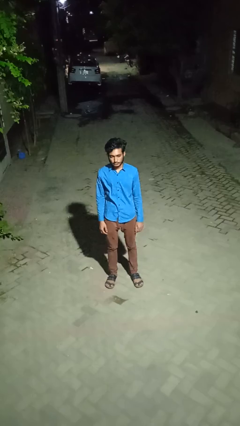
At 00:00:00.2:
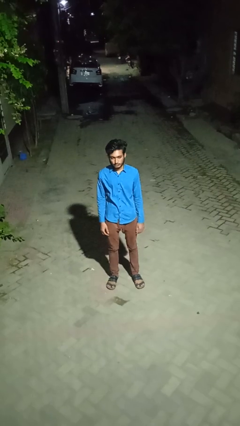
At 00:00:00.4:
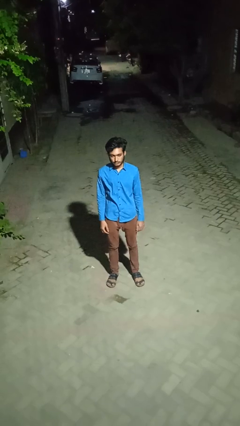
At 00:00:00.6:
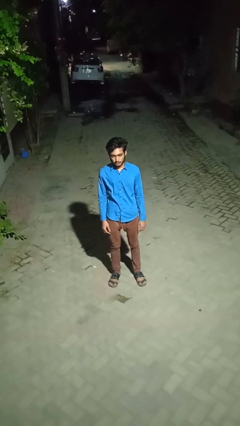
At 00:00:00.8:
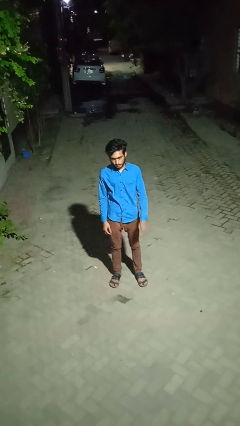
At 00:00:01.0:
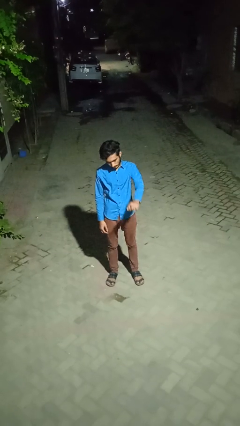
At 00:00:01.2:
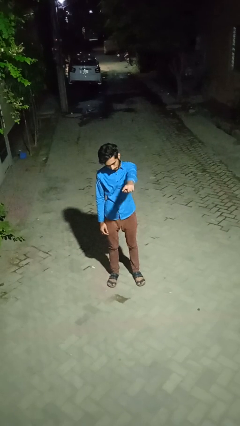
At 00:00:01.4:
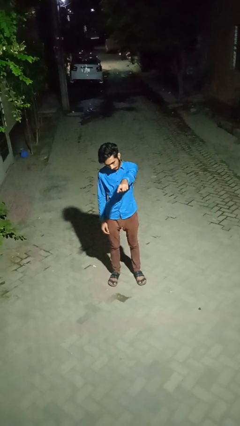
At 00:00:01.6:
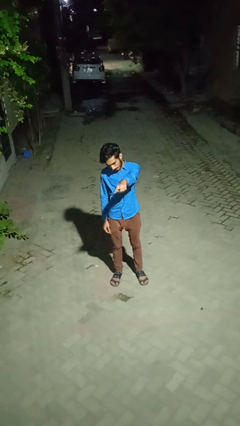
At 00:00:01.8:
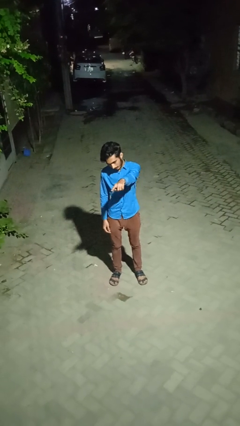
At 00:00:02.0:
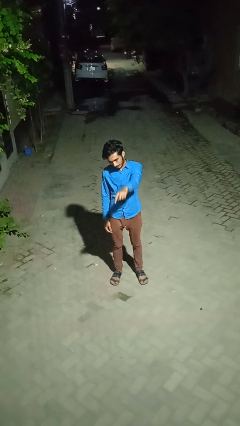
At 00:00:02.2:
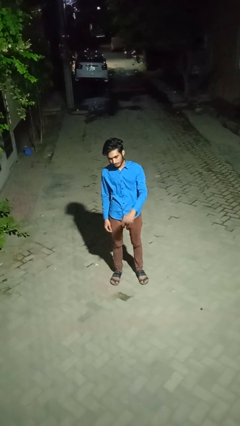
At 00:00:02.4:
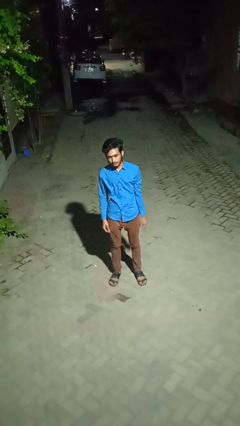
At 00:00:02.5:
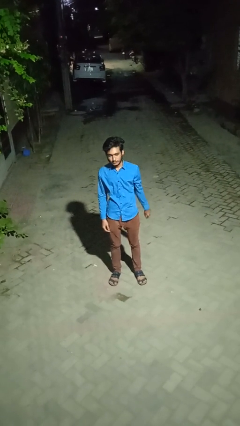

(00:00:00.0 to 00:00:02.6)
person points at person

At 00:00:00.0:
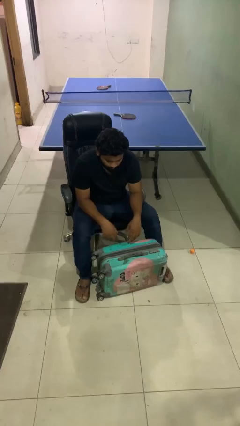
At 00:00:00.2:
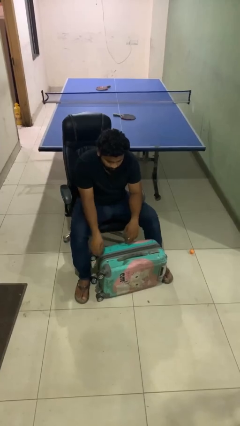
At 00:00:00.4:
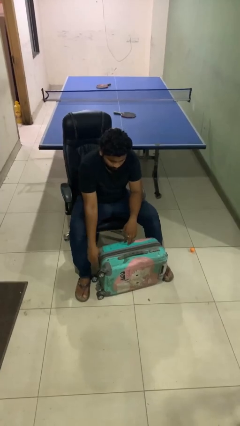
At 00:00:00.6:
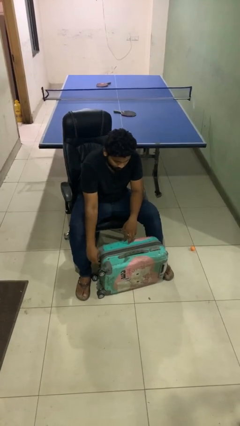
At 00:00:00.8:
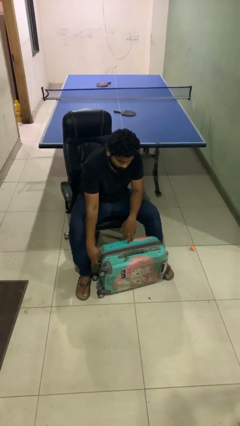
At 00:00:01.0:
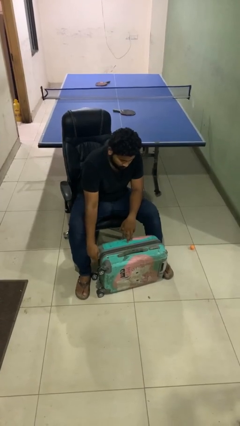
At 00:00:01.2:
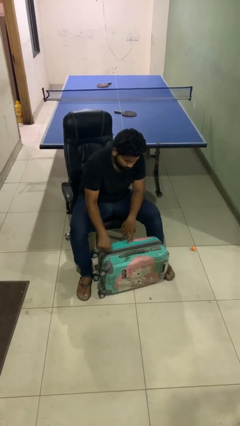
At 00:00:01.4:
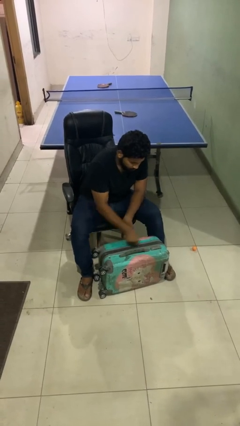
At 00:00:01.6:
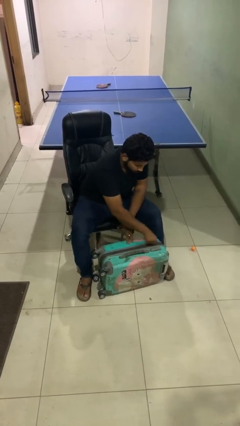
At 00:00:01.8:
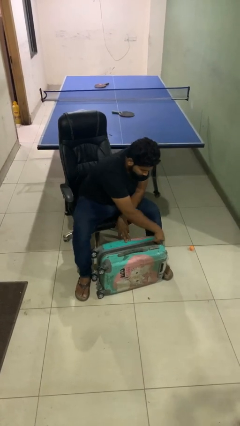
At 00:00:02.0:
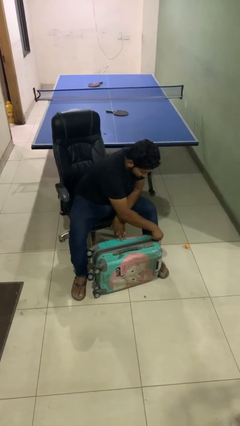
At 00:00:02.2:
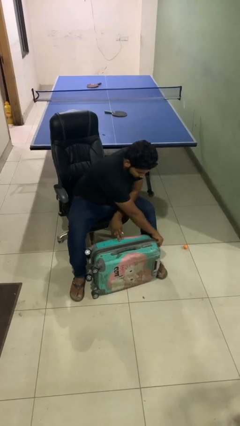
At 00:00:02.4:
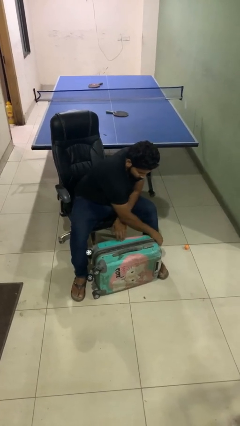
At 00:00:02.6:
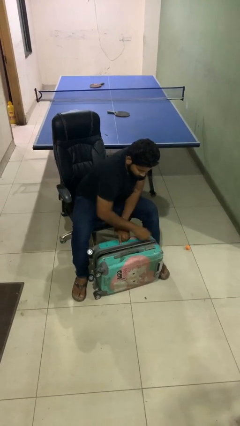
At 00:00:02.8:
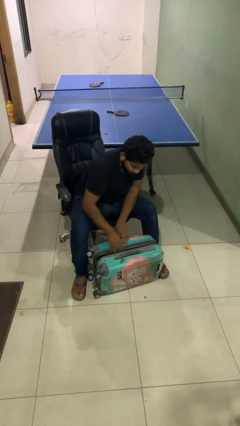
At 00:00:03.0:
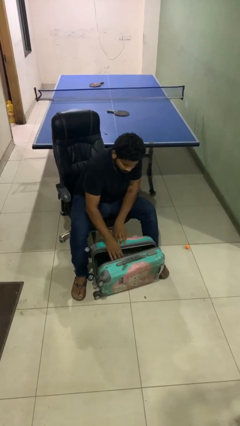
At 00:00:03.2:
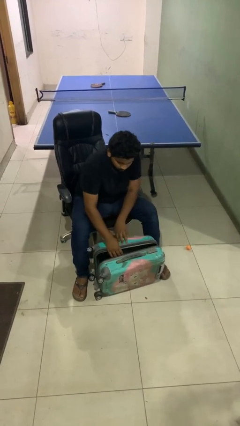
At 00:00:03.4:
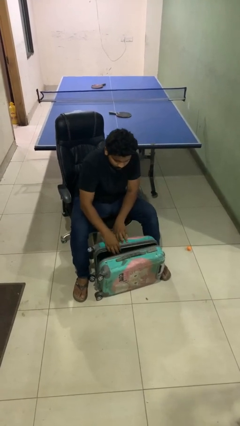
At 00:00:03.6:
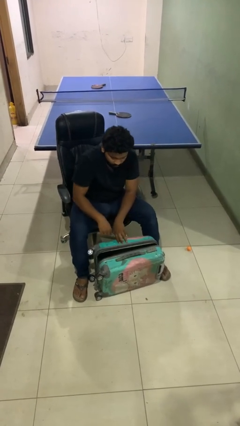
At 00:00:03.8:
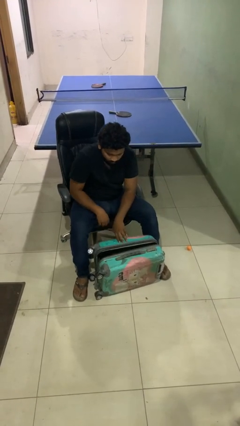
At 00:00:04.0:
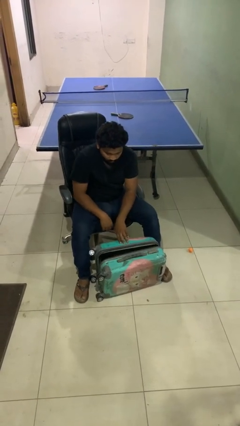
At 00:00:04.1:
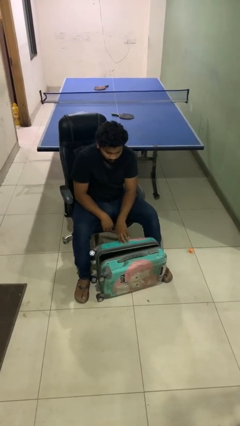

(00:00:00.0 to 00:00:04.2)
person opens suitcase

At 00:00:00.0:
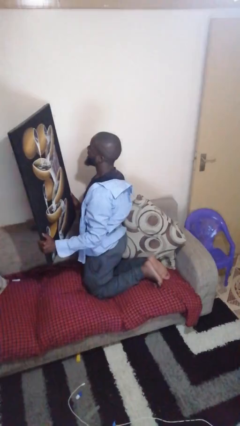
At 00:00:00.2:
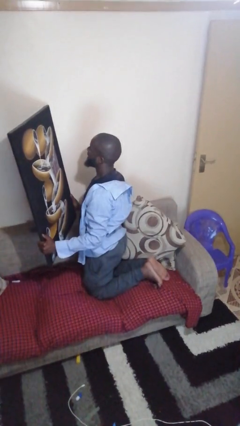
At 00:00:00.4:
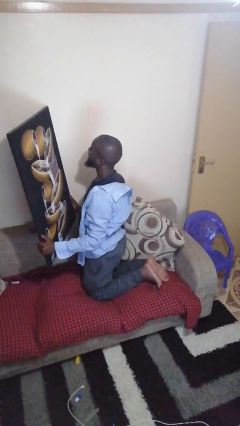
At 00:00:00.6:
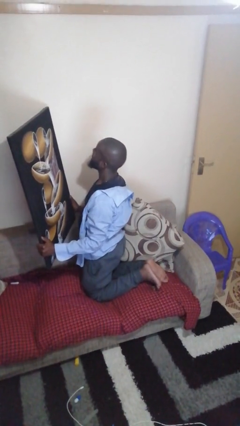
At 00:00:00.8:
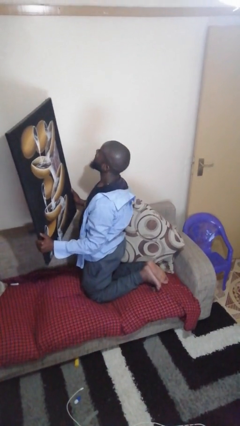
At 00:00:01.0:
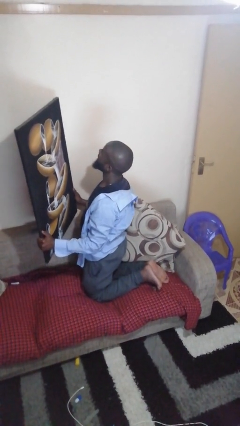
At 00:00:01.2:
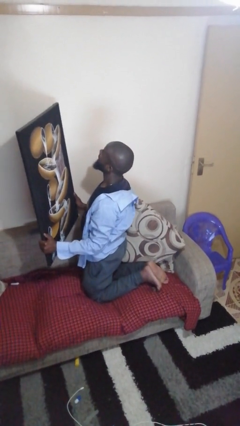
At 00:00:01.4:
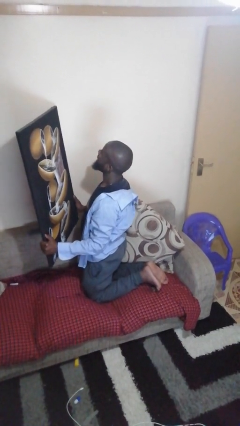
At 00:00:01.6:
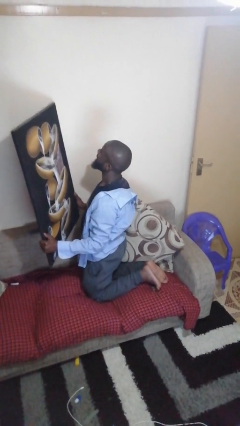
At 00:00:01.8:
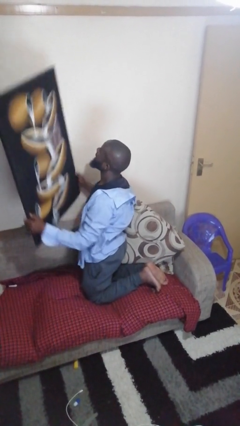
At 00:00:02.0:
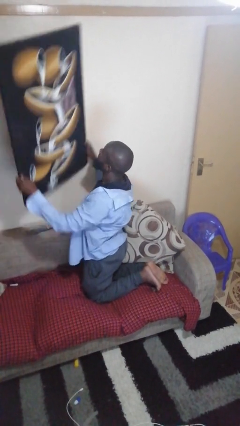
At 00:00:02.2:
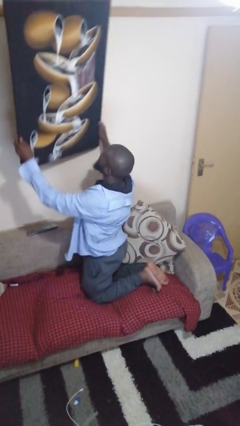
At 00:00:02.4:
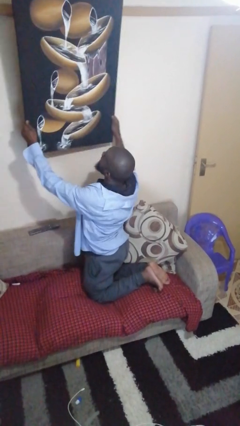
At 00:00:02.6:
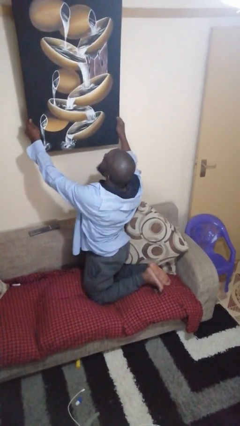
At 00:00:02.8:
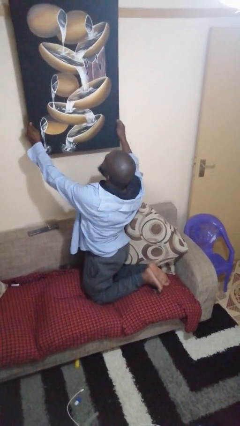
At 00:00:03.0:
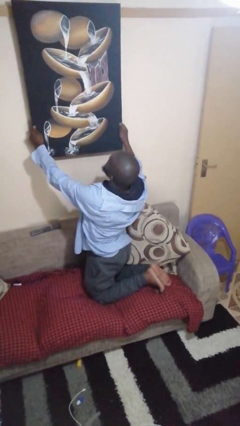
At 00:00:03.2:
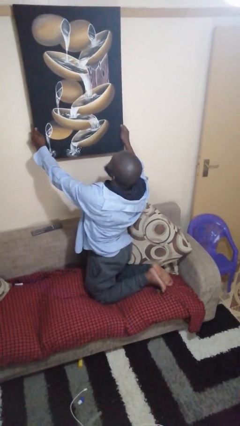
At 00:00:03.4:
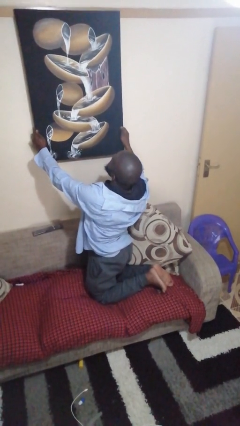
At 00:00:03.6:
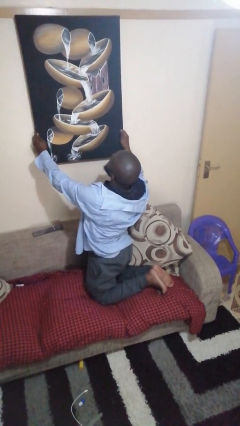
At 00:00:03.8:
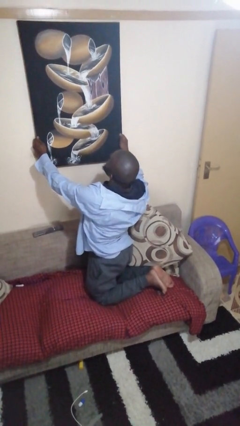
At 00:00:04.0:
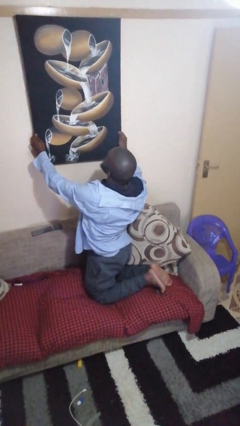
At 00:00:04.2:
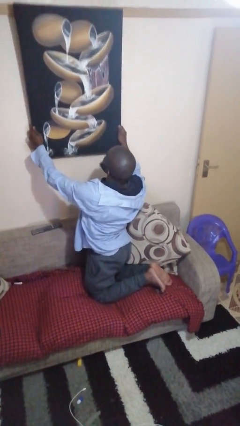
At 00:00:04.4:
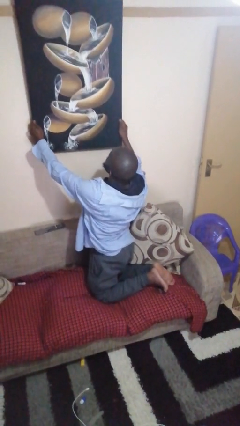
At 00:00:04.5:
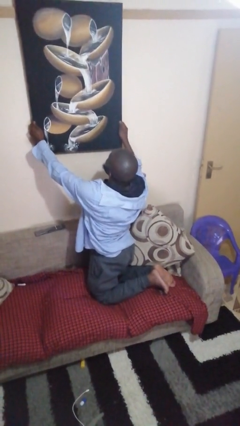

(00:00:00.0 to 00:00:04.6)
person puts up picture frame

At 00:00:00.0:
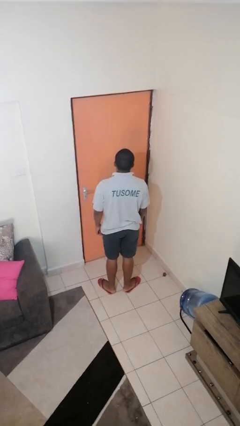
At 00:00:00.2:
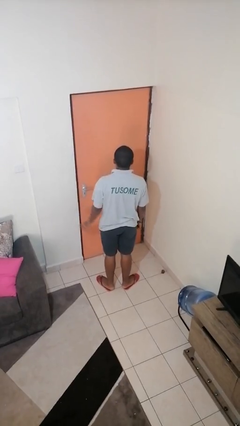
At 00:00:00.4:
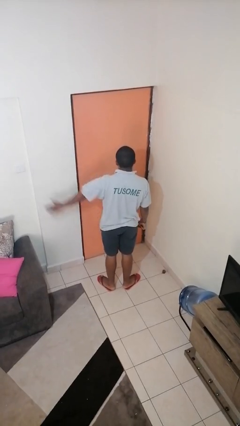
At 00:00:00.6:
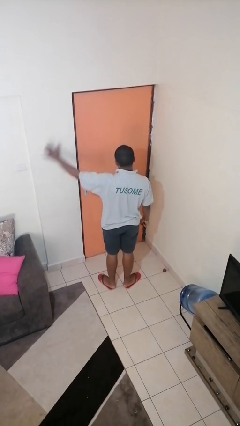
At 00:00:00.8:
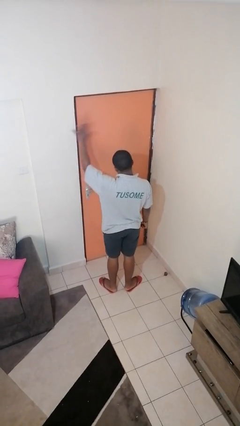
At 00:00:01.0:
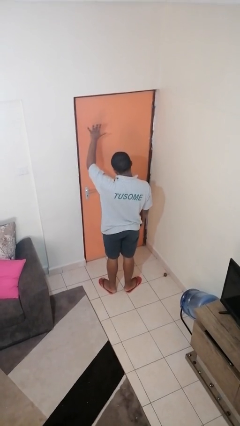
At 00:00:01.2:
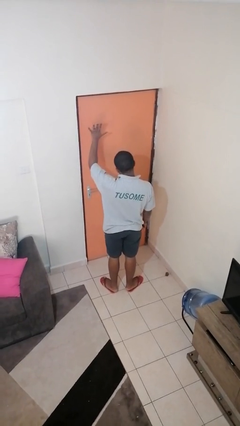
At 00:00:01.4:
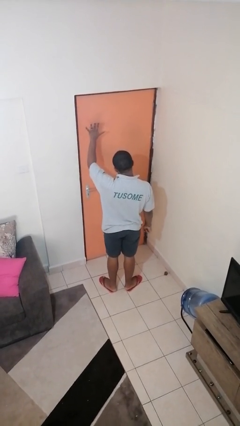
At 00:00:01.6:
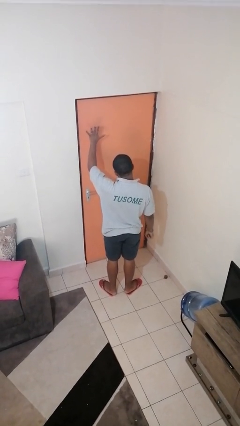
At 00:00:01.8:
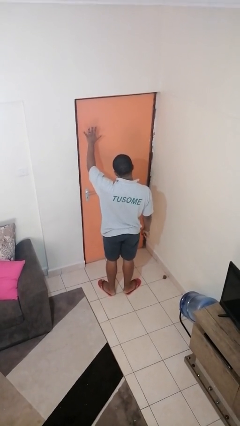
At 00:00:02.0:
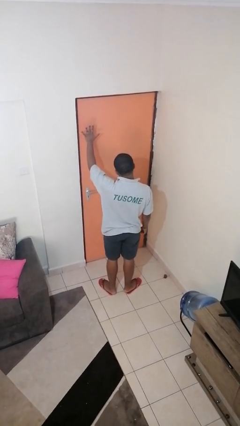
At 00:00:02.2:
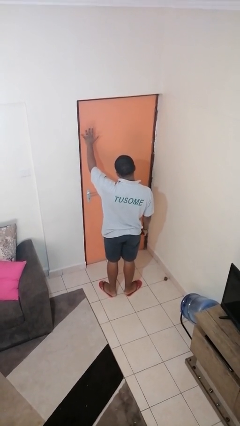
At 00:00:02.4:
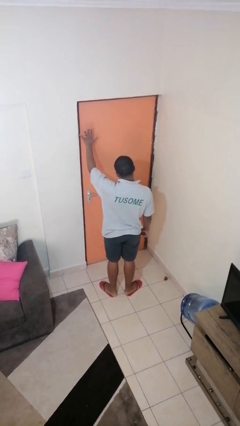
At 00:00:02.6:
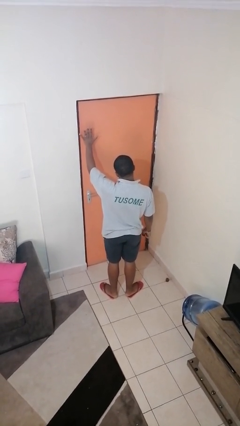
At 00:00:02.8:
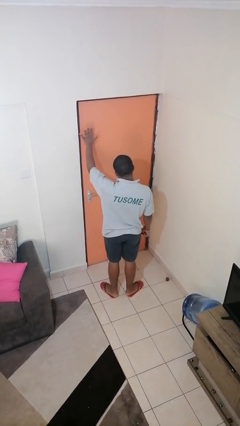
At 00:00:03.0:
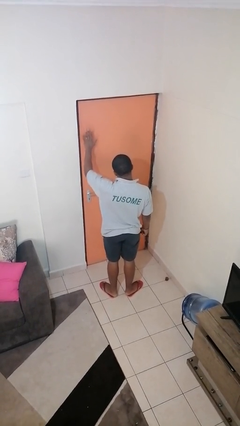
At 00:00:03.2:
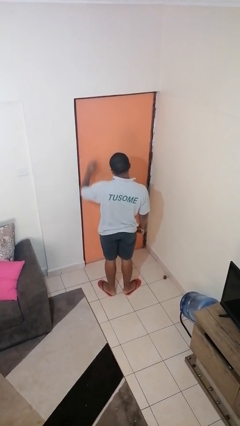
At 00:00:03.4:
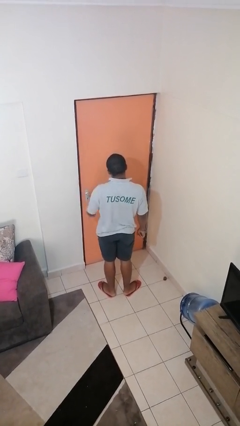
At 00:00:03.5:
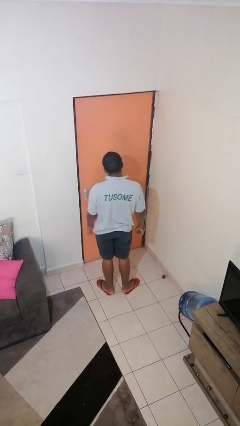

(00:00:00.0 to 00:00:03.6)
person gestures number five

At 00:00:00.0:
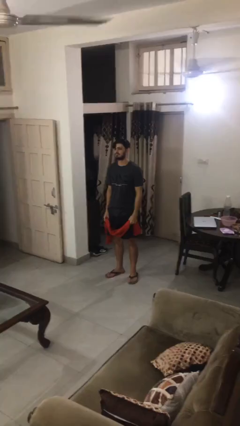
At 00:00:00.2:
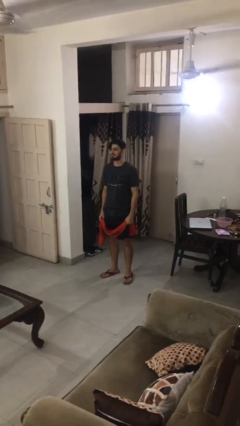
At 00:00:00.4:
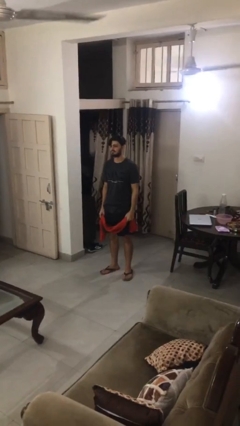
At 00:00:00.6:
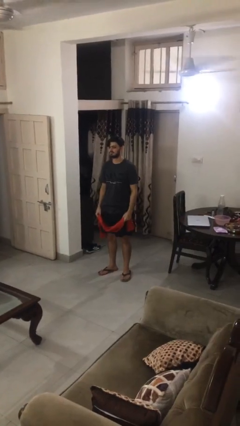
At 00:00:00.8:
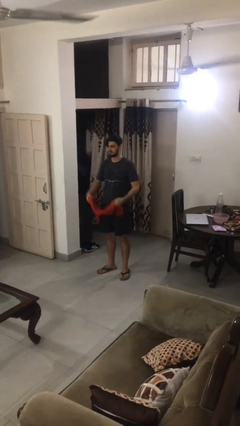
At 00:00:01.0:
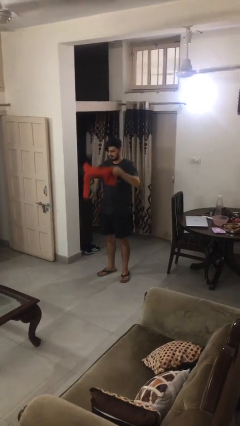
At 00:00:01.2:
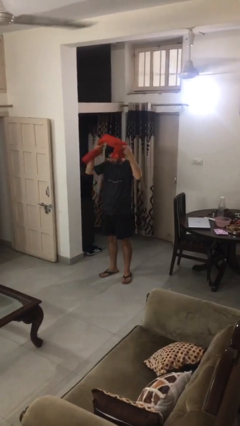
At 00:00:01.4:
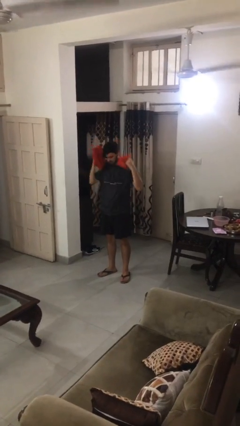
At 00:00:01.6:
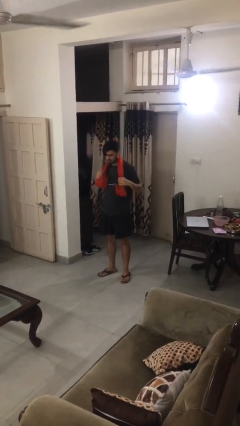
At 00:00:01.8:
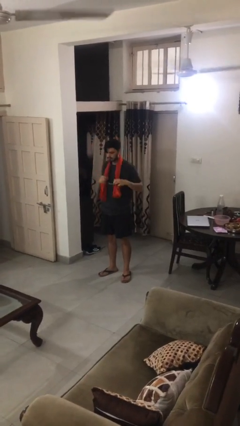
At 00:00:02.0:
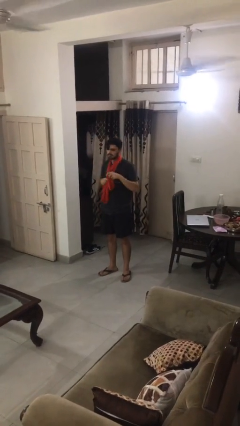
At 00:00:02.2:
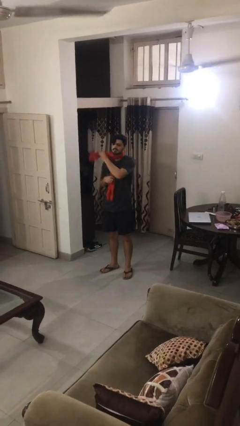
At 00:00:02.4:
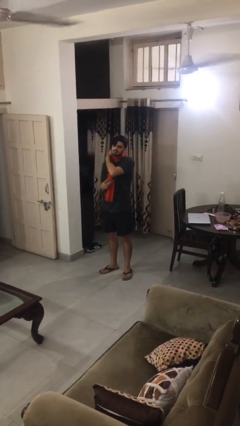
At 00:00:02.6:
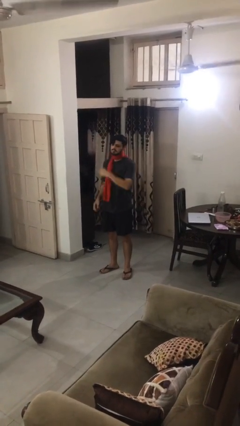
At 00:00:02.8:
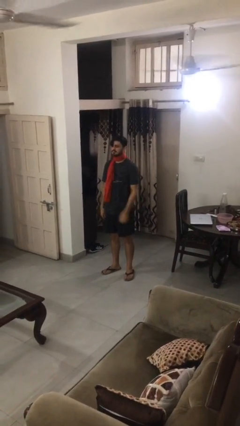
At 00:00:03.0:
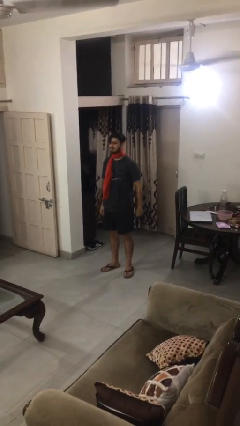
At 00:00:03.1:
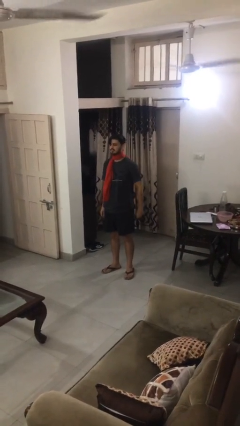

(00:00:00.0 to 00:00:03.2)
person puts on scarf
